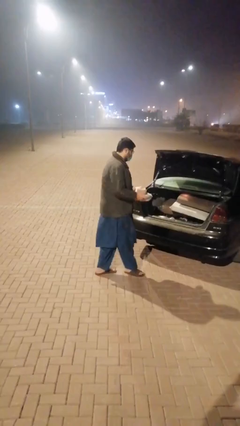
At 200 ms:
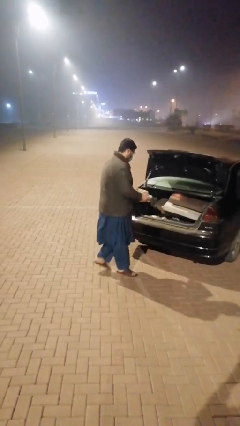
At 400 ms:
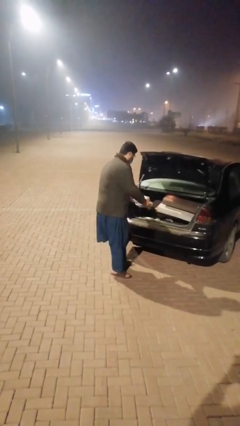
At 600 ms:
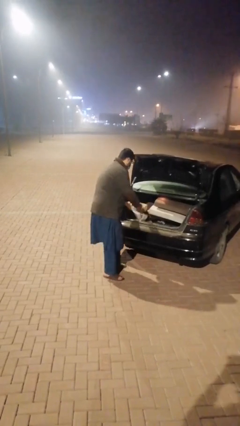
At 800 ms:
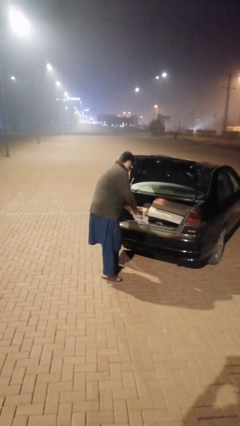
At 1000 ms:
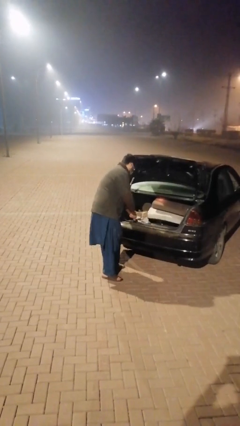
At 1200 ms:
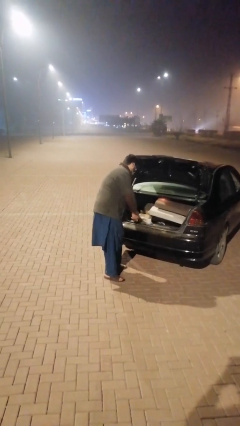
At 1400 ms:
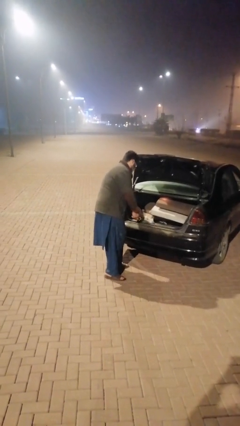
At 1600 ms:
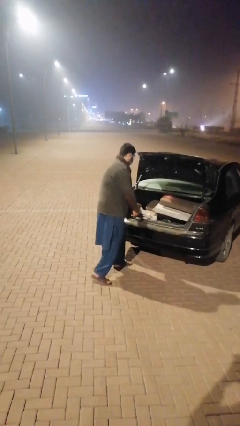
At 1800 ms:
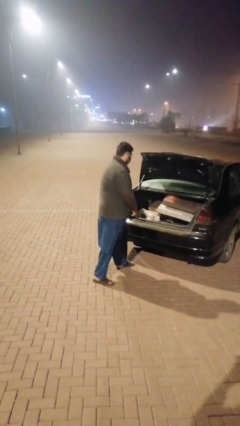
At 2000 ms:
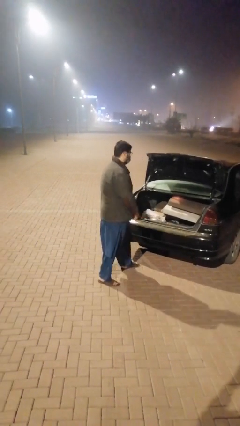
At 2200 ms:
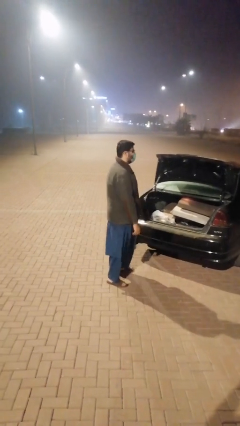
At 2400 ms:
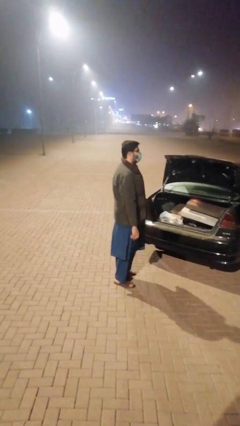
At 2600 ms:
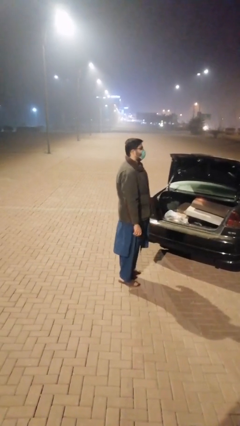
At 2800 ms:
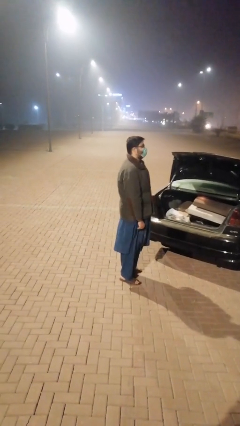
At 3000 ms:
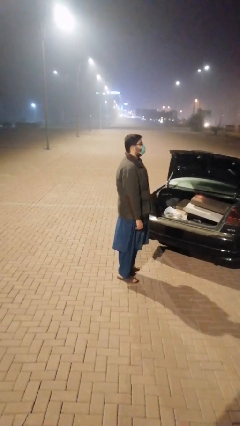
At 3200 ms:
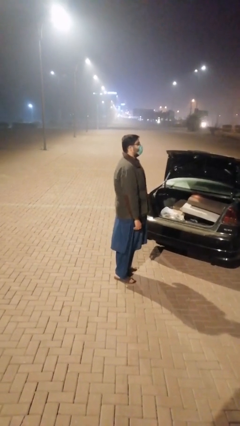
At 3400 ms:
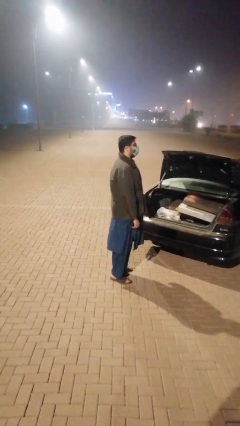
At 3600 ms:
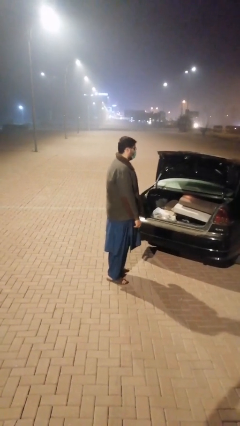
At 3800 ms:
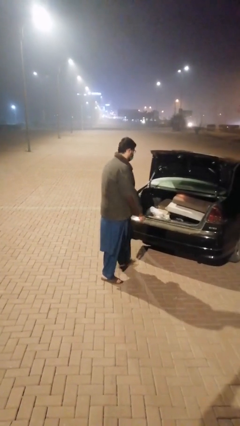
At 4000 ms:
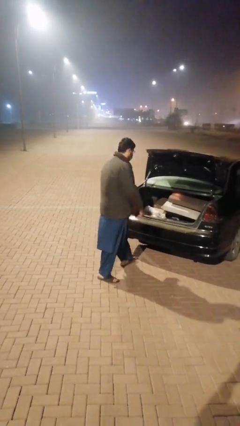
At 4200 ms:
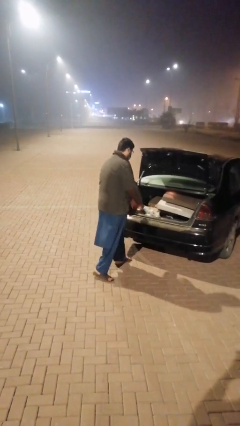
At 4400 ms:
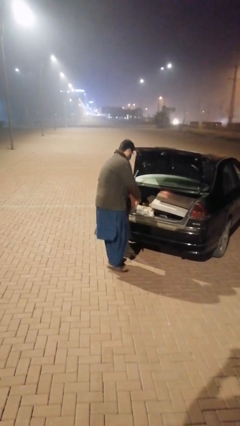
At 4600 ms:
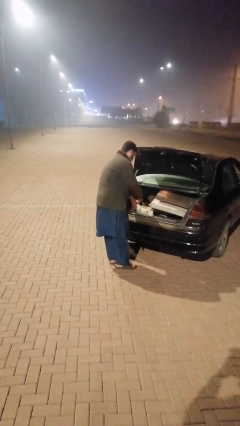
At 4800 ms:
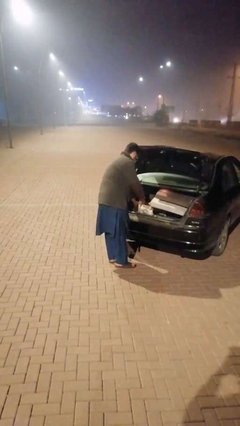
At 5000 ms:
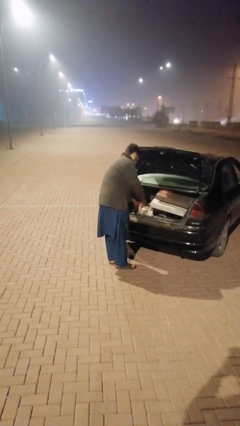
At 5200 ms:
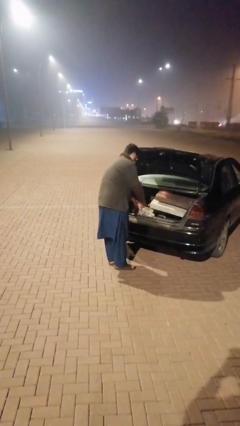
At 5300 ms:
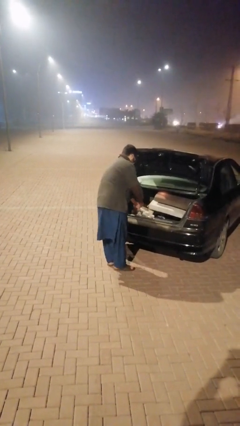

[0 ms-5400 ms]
person loads car

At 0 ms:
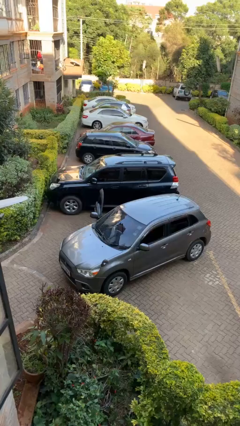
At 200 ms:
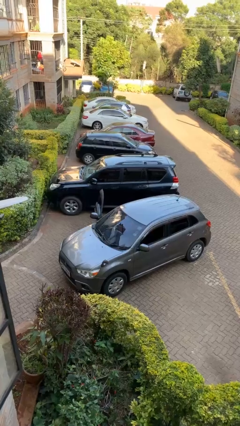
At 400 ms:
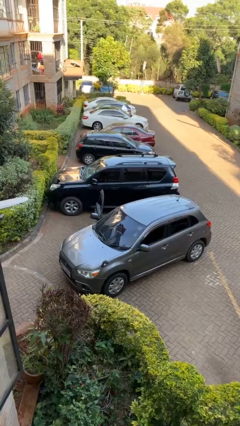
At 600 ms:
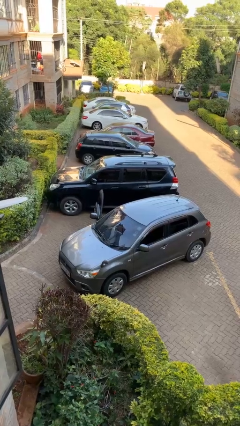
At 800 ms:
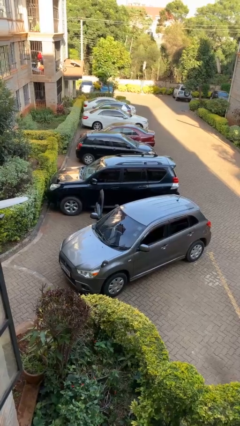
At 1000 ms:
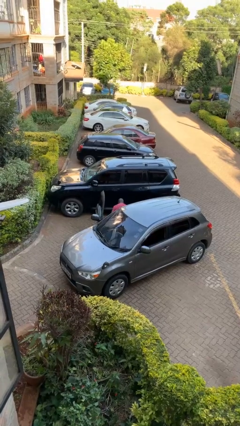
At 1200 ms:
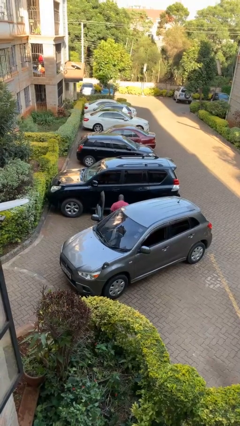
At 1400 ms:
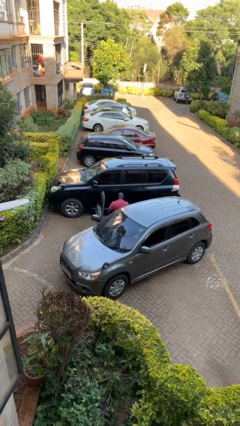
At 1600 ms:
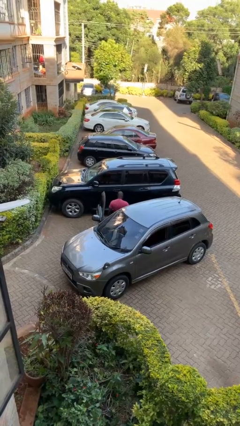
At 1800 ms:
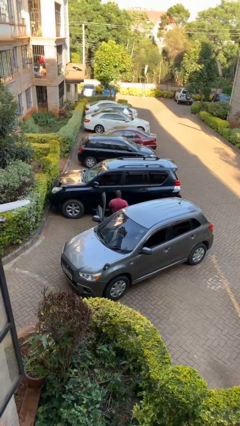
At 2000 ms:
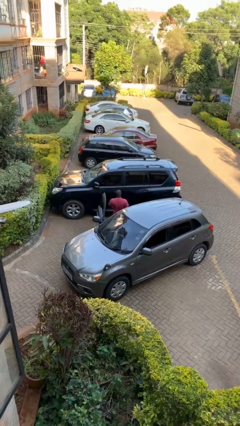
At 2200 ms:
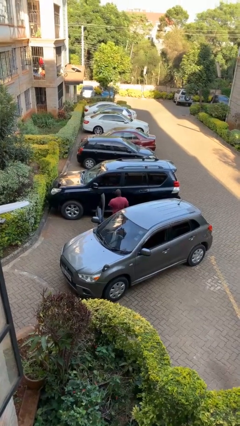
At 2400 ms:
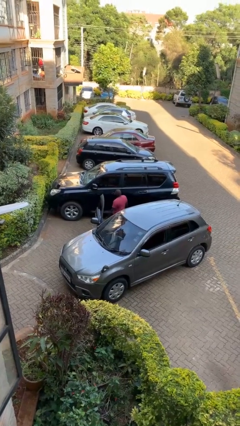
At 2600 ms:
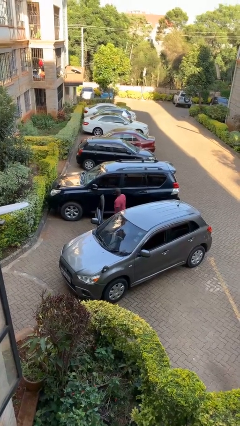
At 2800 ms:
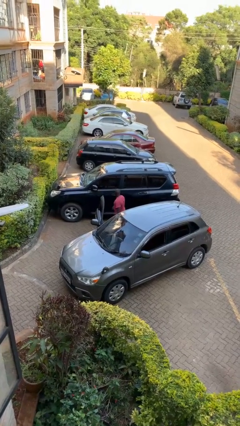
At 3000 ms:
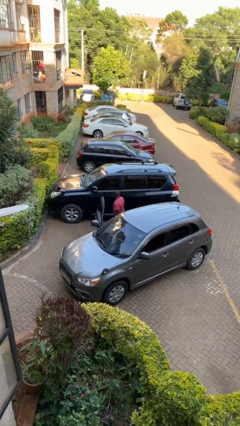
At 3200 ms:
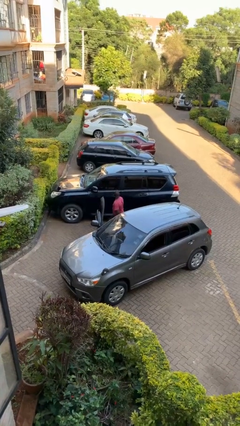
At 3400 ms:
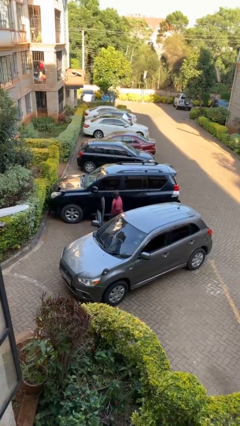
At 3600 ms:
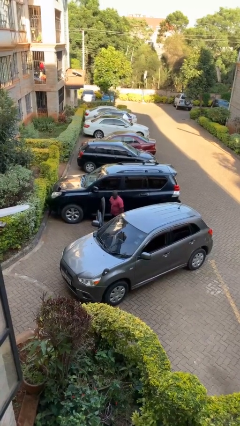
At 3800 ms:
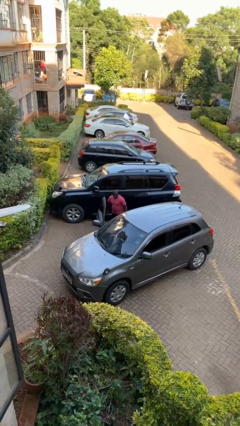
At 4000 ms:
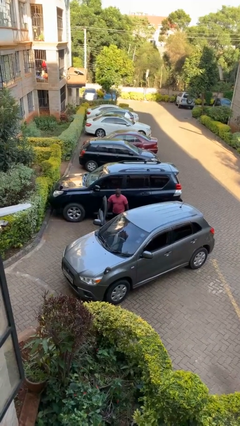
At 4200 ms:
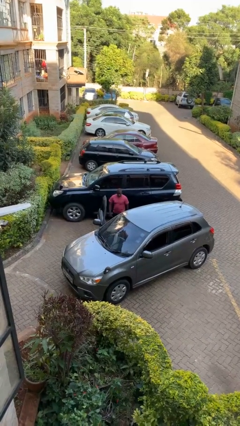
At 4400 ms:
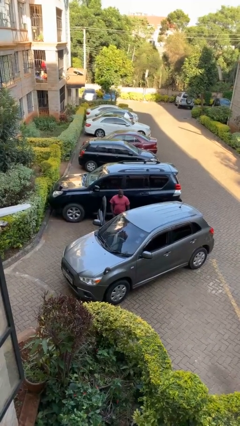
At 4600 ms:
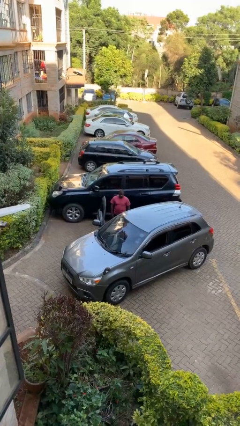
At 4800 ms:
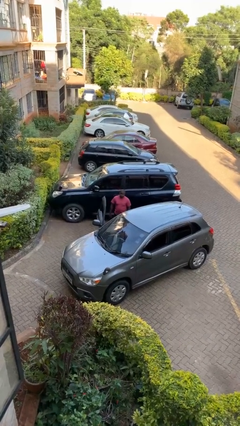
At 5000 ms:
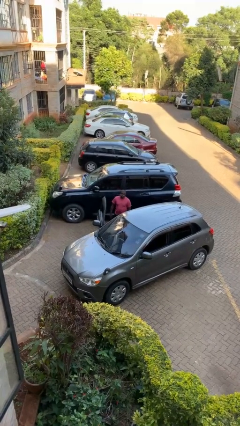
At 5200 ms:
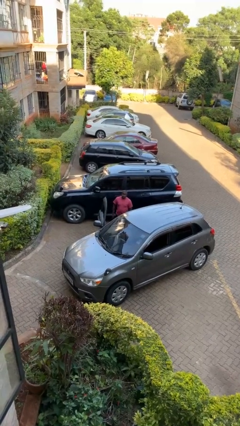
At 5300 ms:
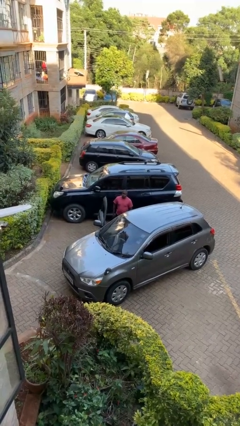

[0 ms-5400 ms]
person exits car

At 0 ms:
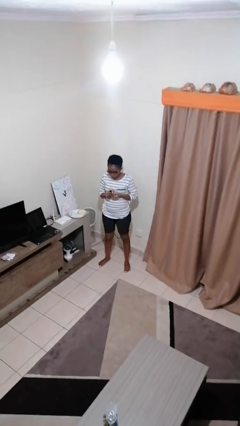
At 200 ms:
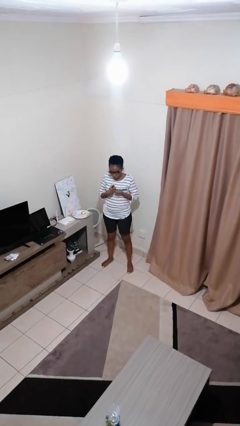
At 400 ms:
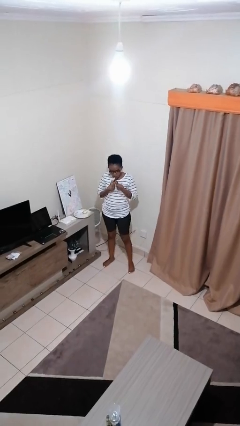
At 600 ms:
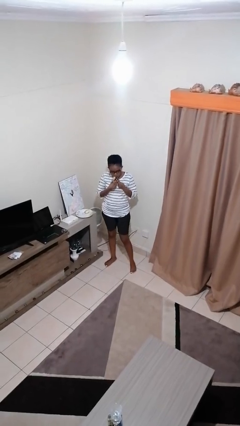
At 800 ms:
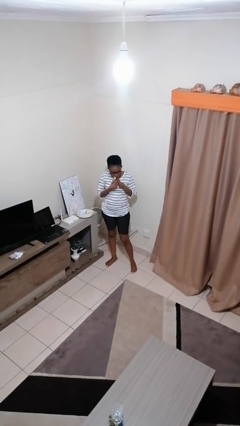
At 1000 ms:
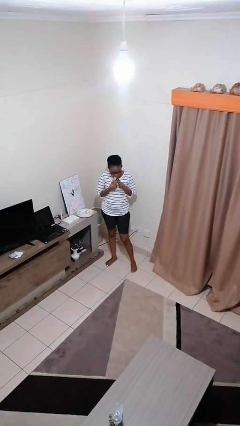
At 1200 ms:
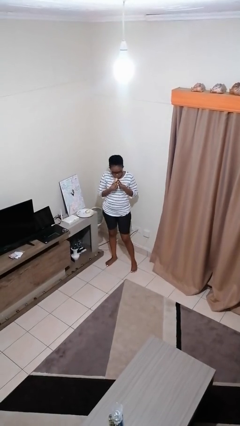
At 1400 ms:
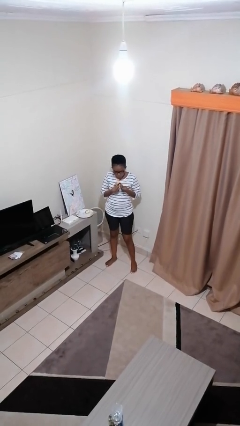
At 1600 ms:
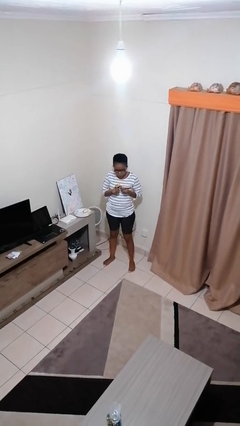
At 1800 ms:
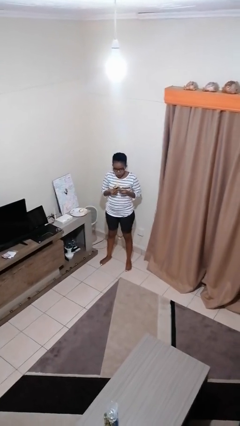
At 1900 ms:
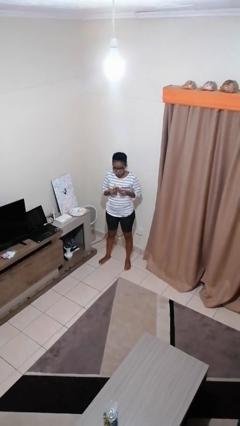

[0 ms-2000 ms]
person eats banana

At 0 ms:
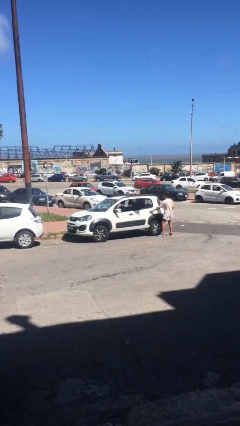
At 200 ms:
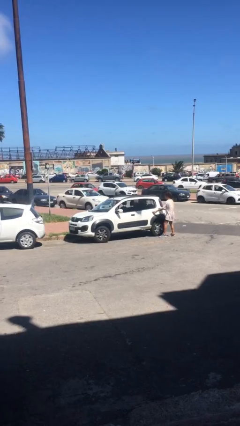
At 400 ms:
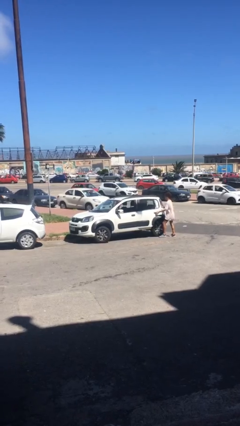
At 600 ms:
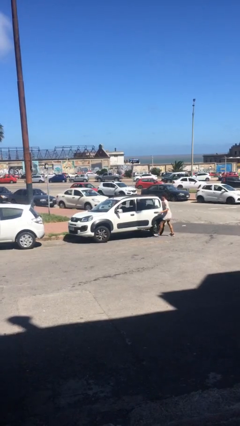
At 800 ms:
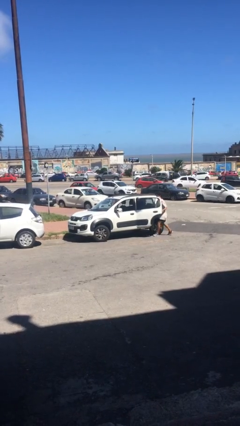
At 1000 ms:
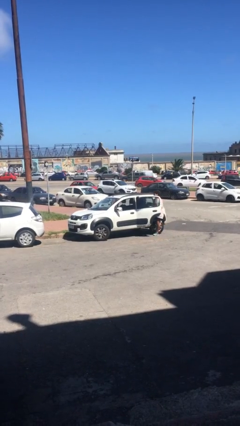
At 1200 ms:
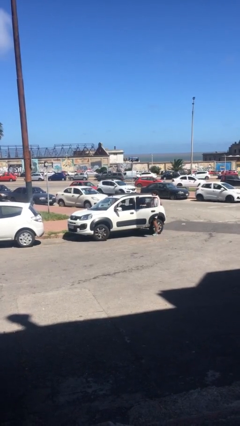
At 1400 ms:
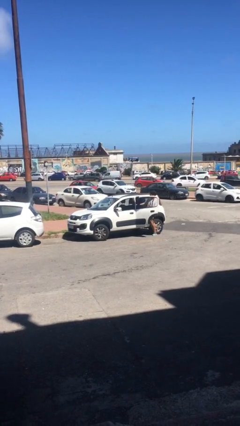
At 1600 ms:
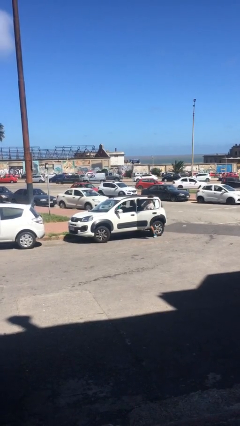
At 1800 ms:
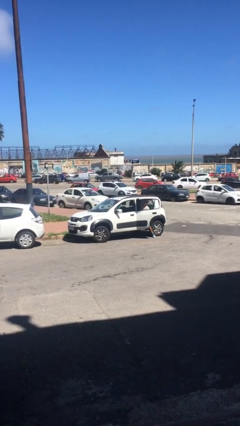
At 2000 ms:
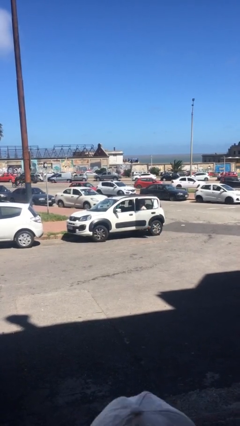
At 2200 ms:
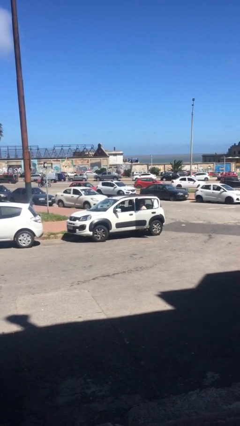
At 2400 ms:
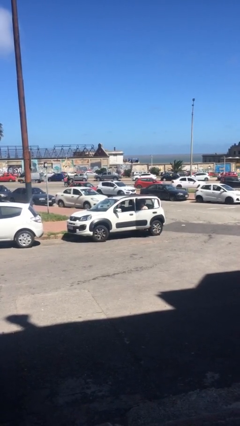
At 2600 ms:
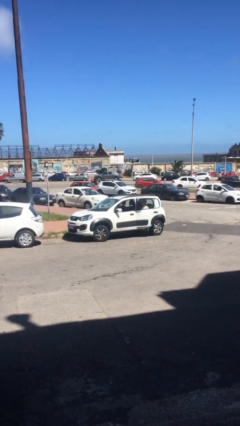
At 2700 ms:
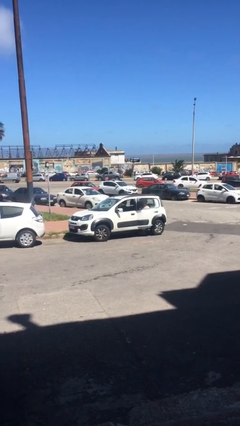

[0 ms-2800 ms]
car picks up person

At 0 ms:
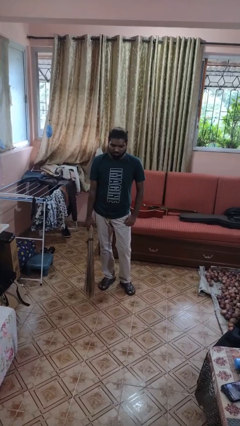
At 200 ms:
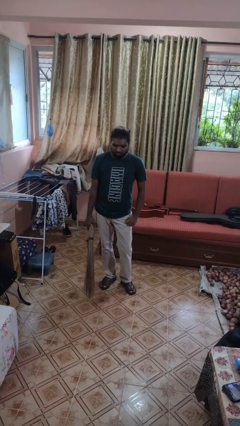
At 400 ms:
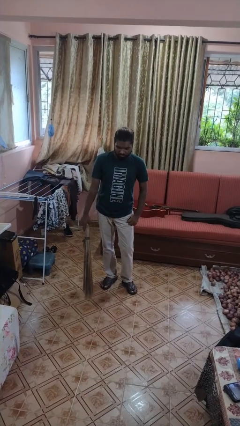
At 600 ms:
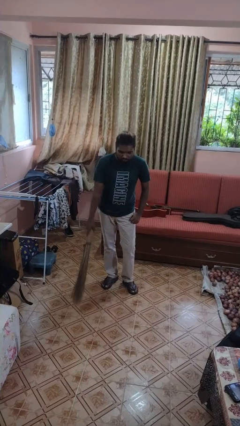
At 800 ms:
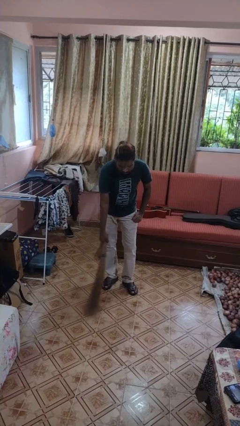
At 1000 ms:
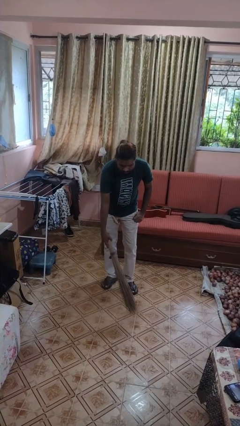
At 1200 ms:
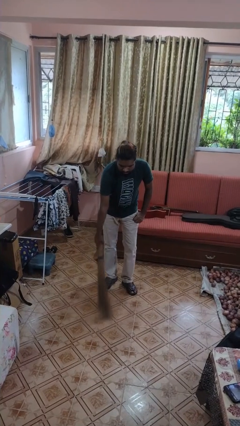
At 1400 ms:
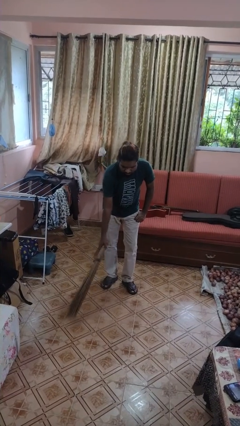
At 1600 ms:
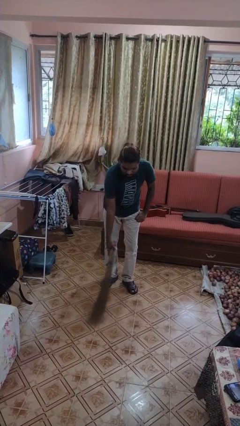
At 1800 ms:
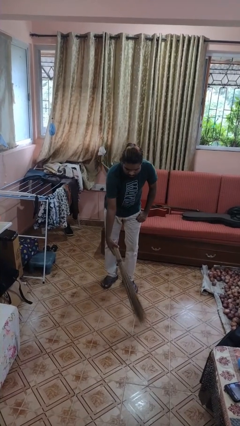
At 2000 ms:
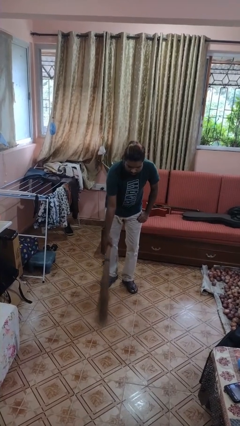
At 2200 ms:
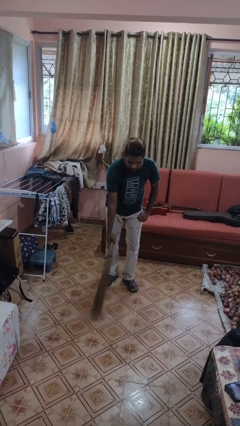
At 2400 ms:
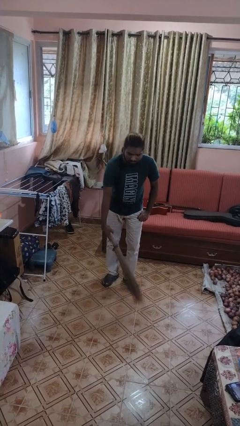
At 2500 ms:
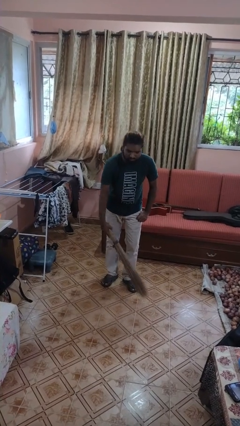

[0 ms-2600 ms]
person sweeps floor
